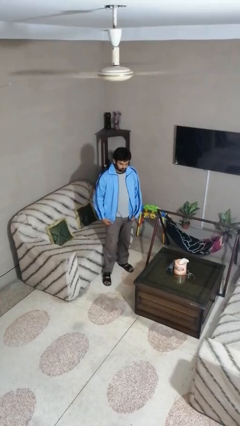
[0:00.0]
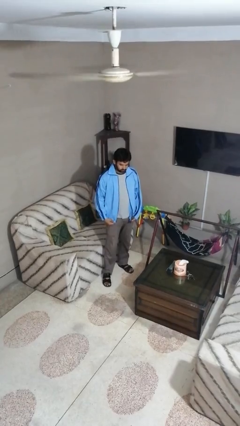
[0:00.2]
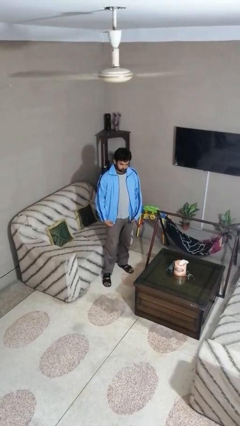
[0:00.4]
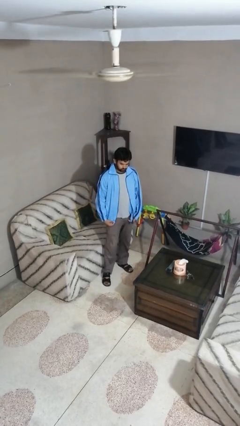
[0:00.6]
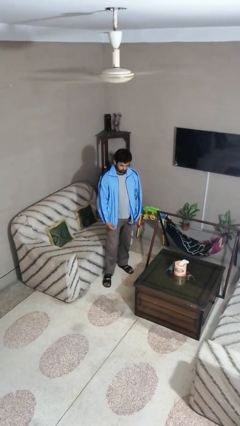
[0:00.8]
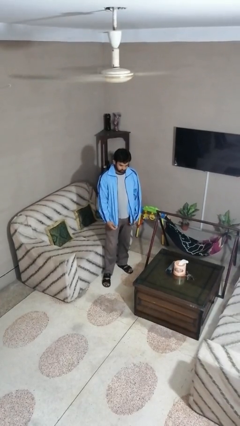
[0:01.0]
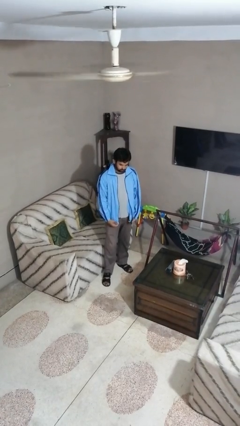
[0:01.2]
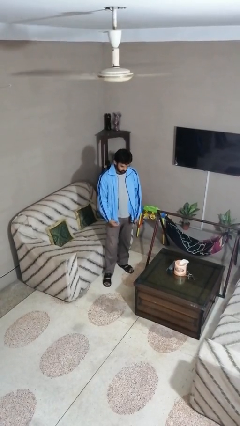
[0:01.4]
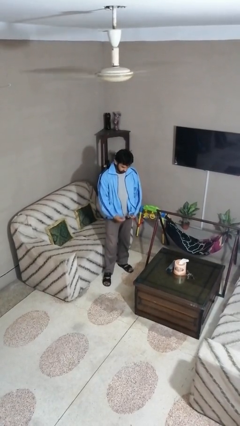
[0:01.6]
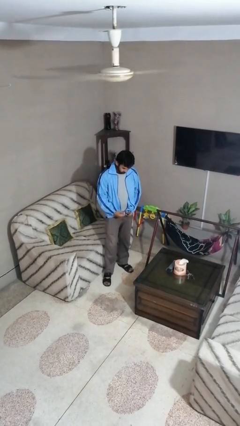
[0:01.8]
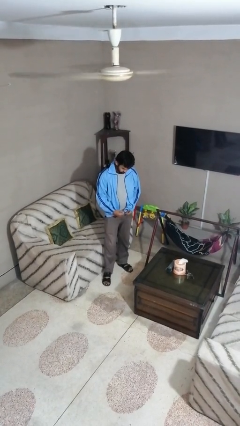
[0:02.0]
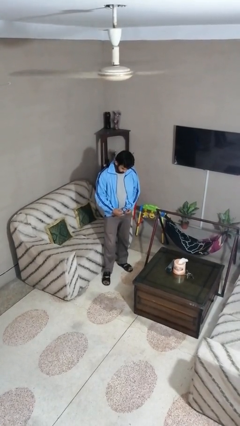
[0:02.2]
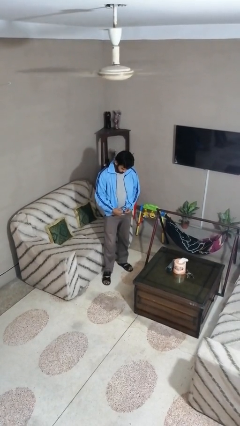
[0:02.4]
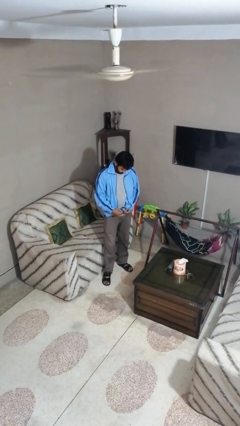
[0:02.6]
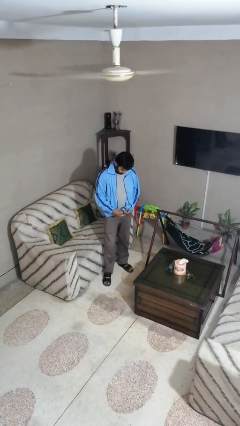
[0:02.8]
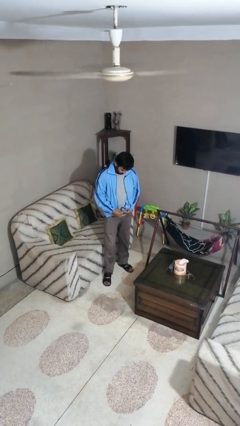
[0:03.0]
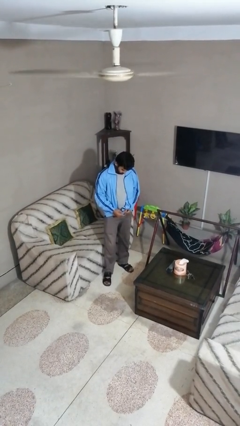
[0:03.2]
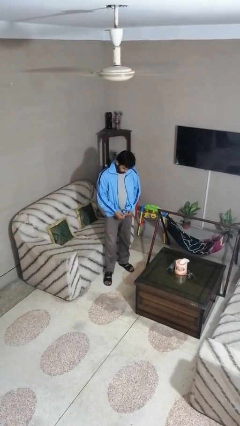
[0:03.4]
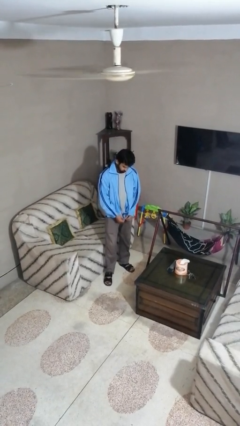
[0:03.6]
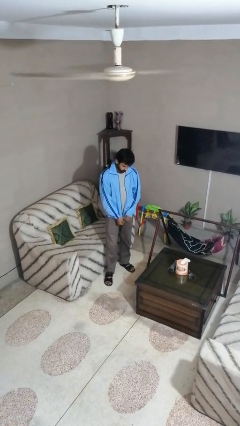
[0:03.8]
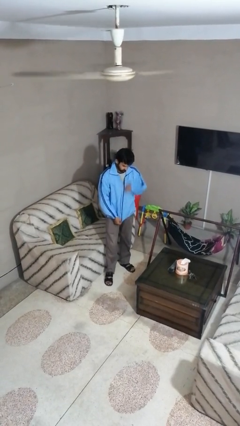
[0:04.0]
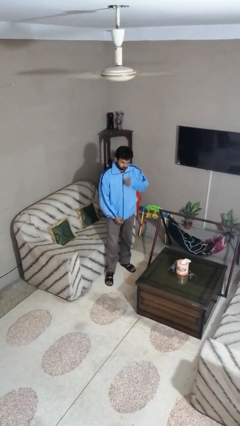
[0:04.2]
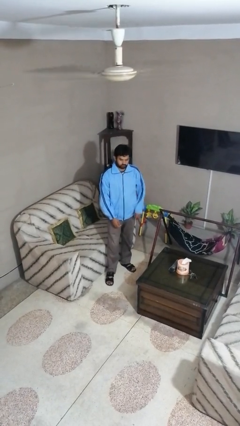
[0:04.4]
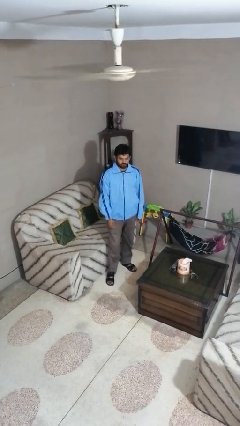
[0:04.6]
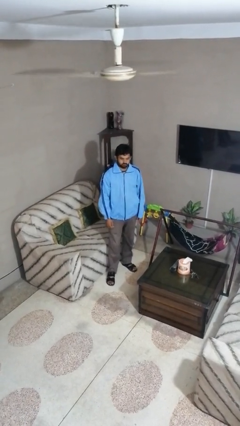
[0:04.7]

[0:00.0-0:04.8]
person zips up jacket

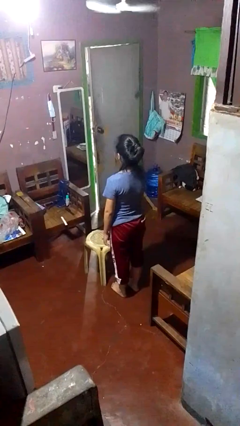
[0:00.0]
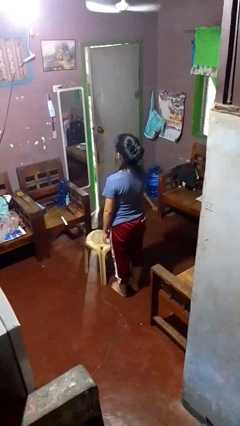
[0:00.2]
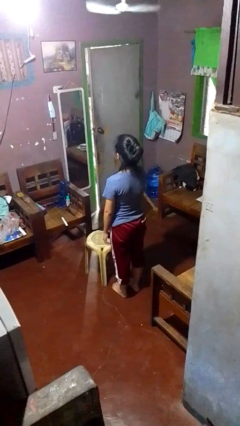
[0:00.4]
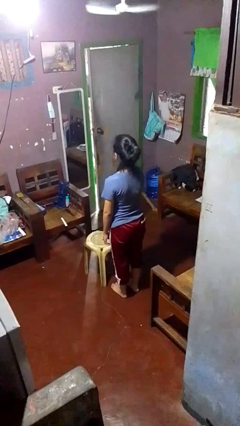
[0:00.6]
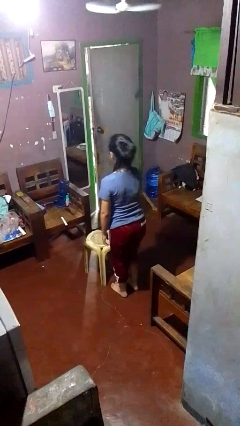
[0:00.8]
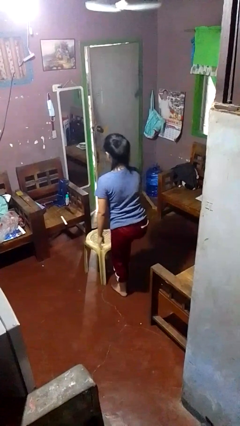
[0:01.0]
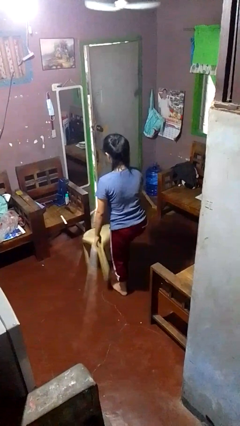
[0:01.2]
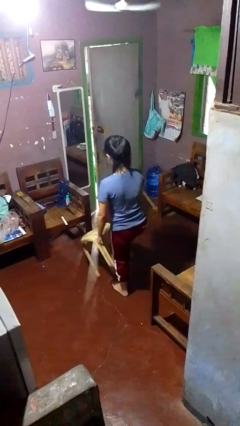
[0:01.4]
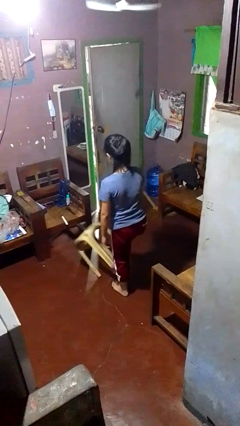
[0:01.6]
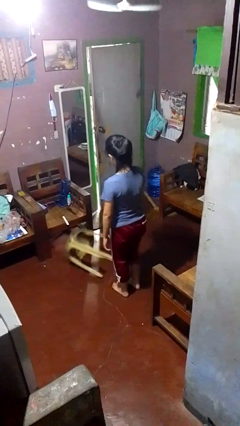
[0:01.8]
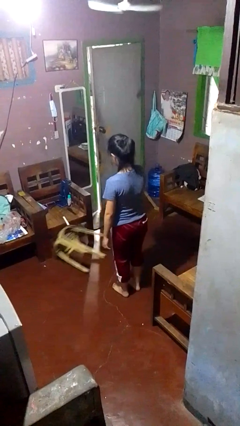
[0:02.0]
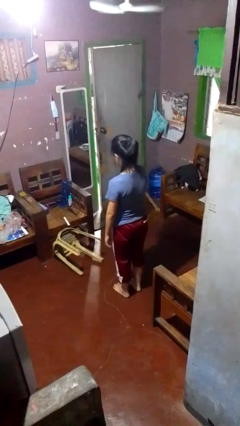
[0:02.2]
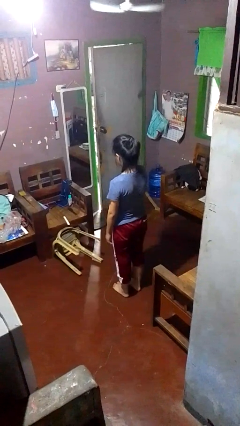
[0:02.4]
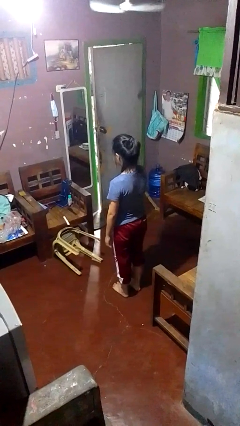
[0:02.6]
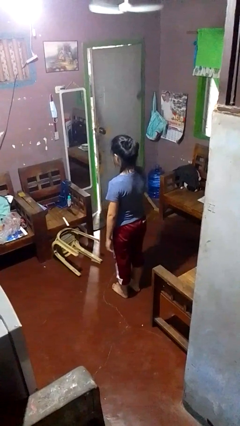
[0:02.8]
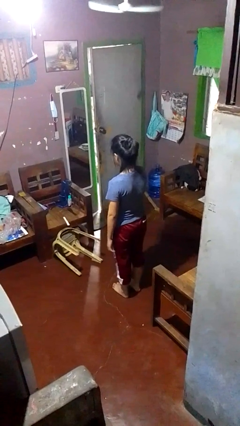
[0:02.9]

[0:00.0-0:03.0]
person knocks over furniture

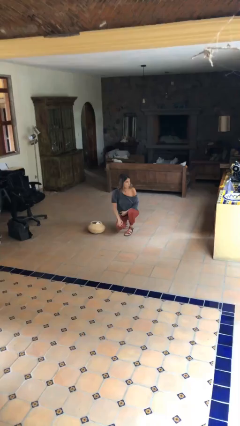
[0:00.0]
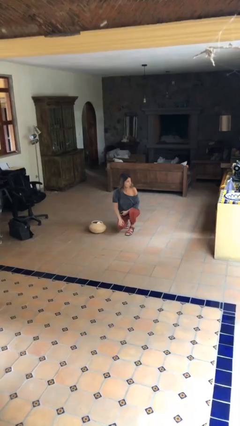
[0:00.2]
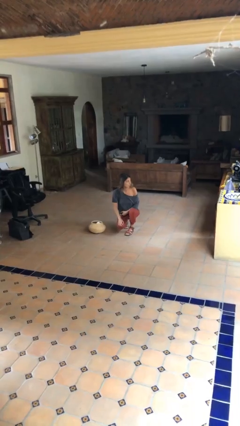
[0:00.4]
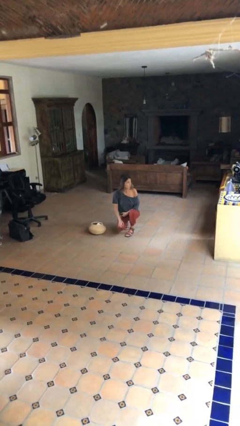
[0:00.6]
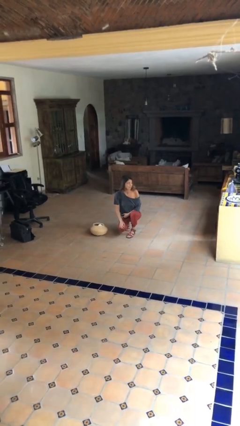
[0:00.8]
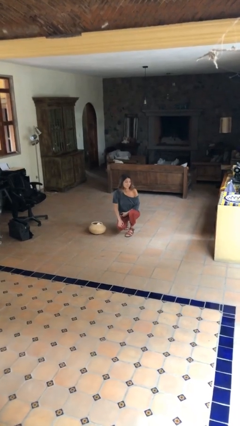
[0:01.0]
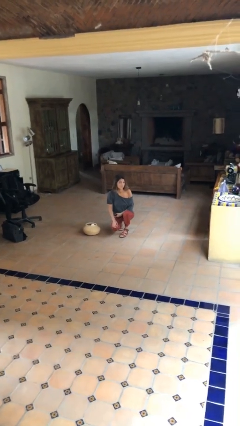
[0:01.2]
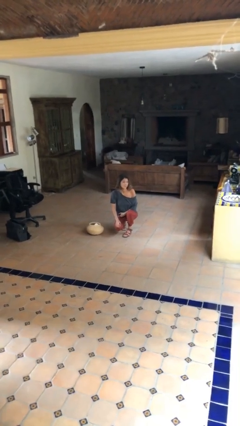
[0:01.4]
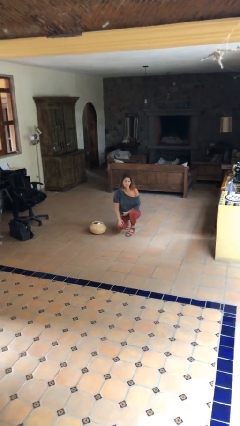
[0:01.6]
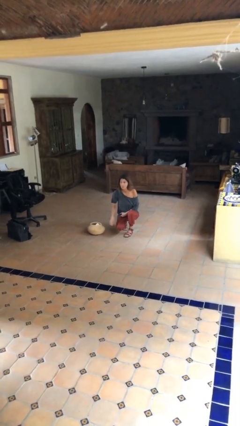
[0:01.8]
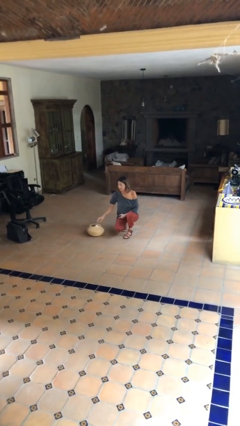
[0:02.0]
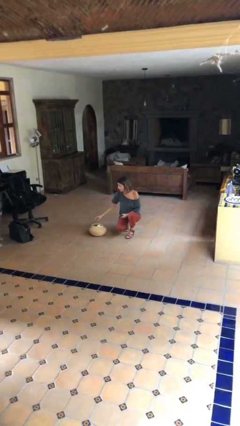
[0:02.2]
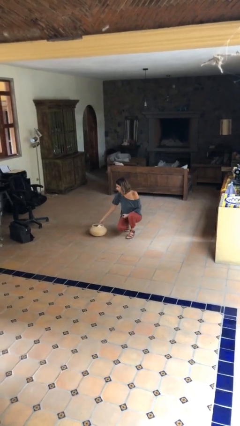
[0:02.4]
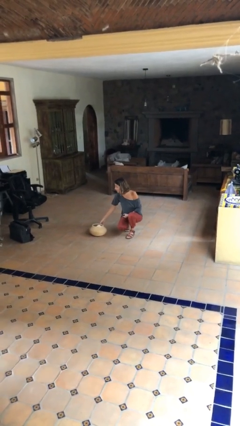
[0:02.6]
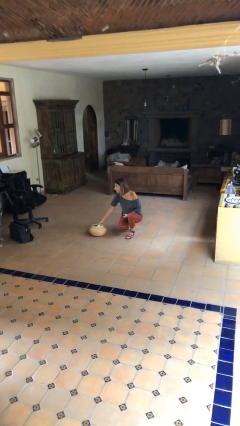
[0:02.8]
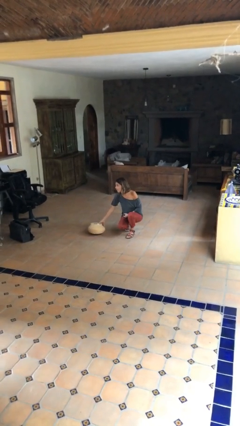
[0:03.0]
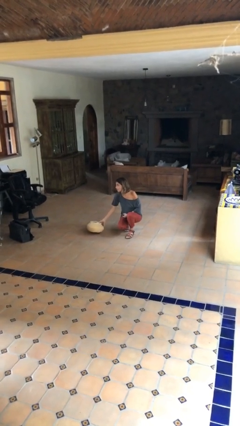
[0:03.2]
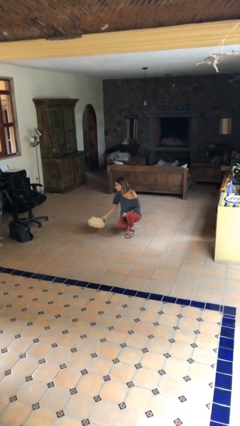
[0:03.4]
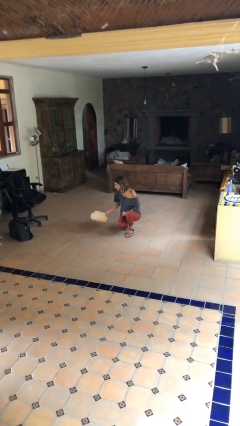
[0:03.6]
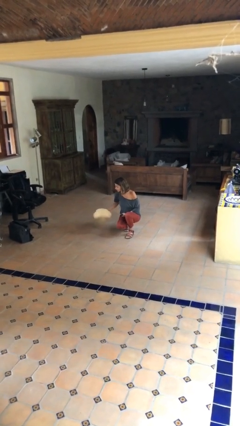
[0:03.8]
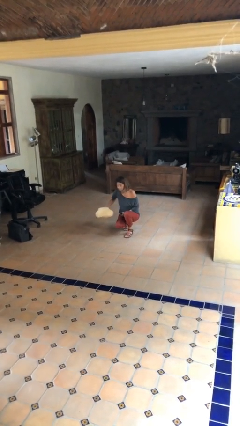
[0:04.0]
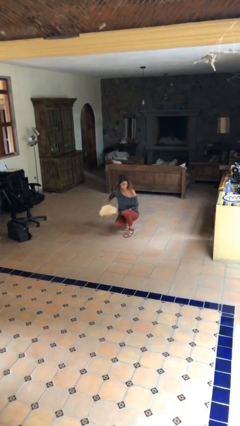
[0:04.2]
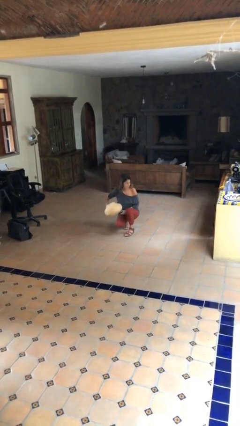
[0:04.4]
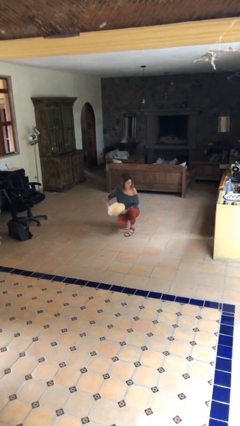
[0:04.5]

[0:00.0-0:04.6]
person picks up object from floor

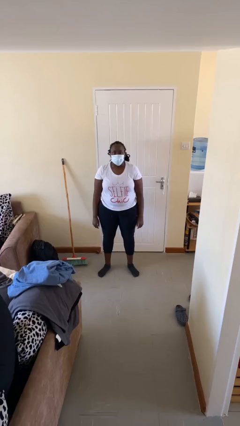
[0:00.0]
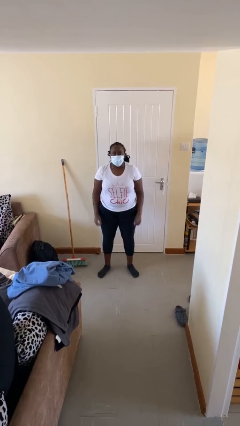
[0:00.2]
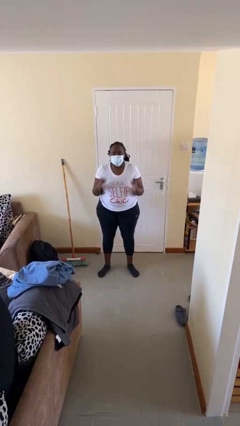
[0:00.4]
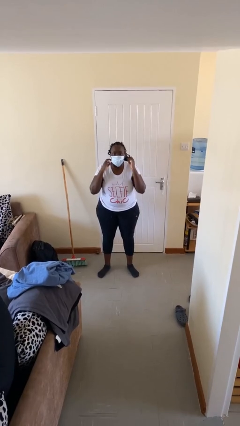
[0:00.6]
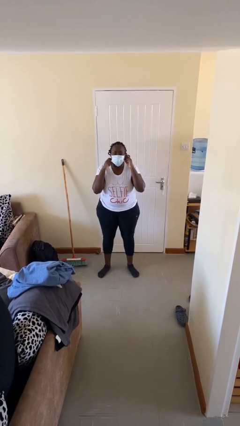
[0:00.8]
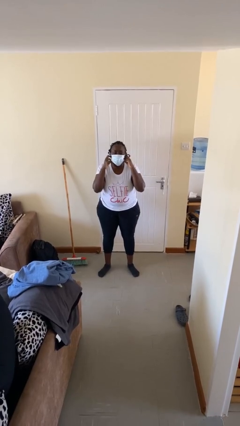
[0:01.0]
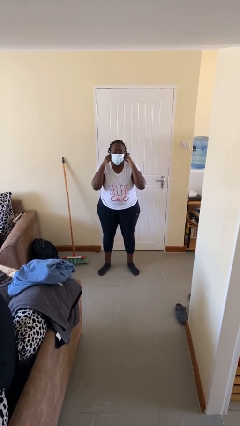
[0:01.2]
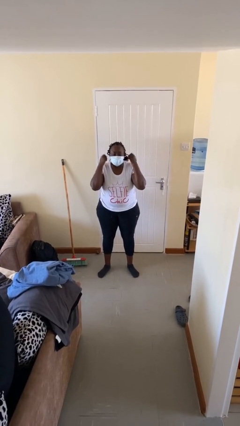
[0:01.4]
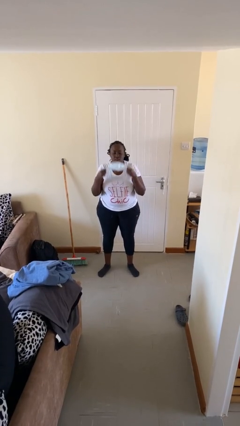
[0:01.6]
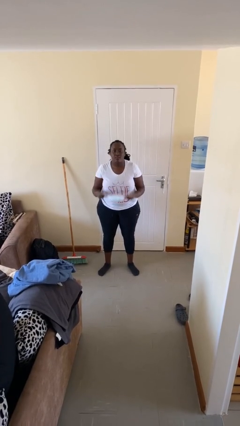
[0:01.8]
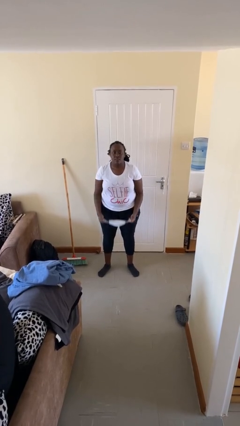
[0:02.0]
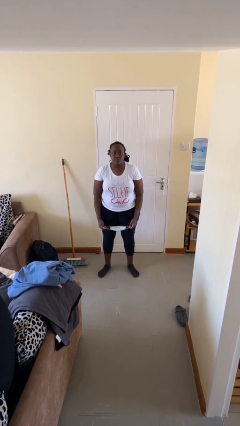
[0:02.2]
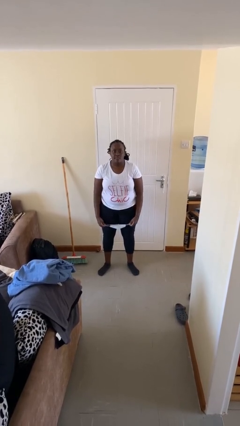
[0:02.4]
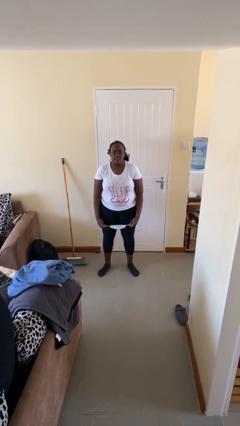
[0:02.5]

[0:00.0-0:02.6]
person takes off facemask

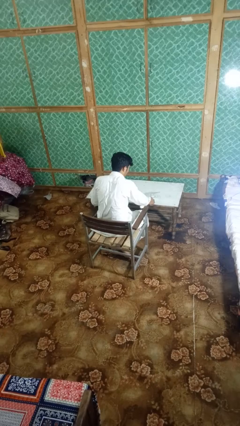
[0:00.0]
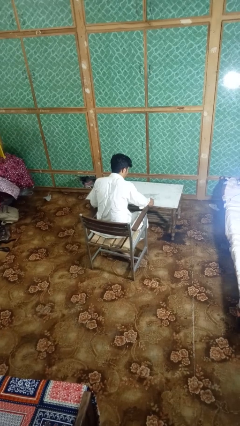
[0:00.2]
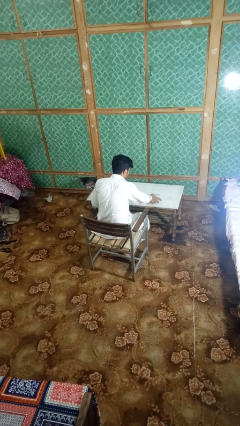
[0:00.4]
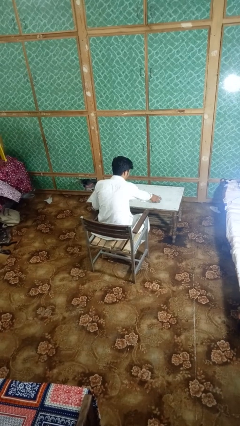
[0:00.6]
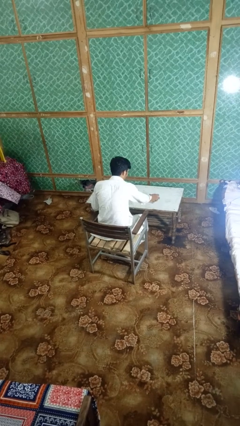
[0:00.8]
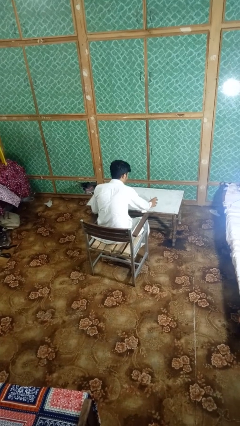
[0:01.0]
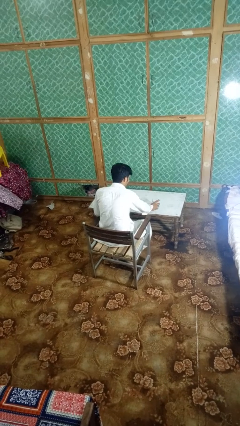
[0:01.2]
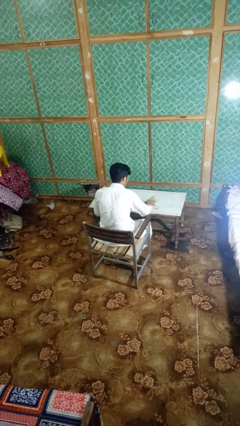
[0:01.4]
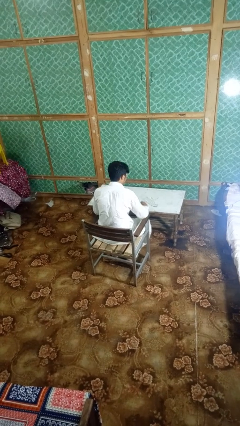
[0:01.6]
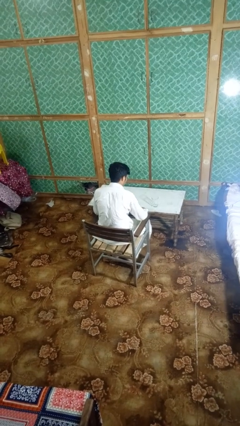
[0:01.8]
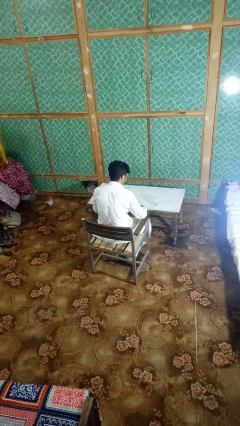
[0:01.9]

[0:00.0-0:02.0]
person sets upright glass

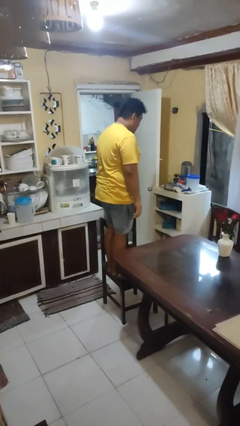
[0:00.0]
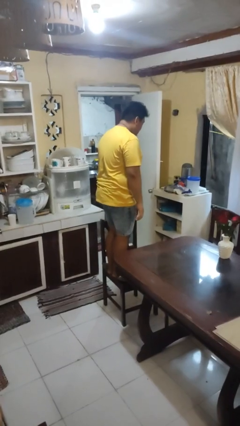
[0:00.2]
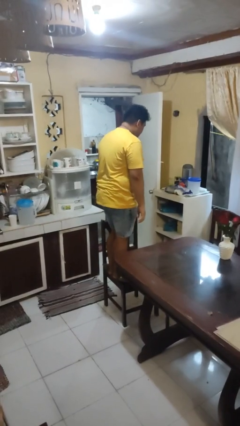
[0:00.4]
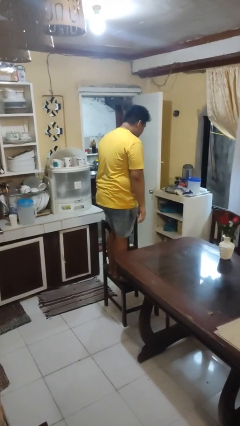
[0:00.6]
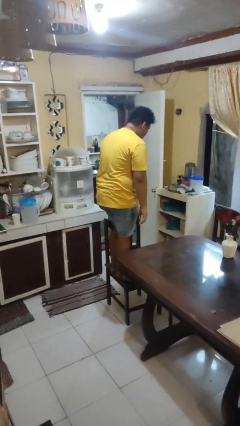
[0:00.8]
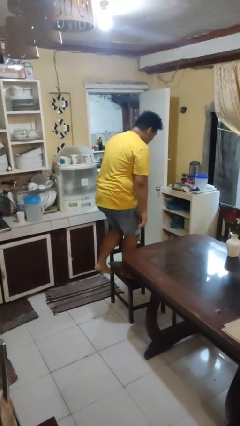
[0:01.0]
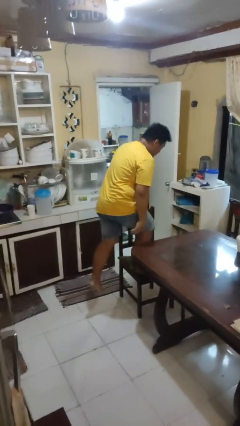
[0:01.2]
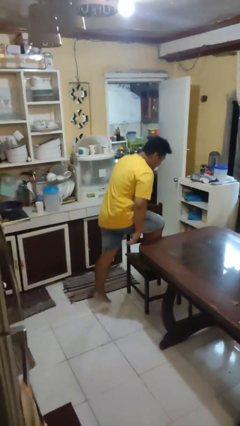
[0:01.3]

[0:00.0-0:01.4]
person climbs off chair
